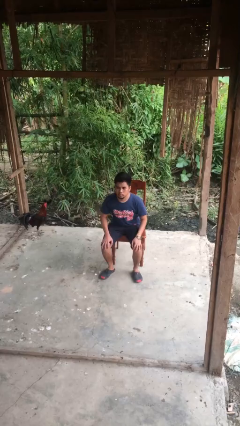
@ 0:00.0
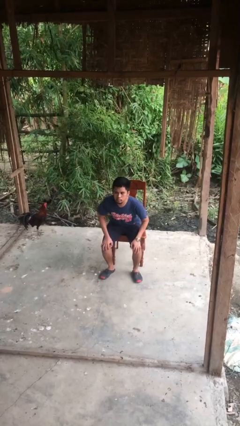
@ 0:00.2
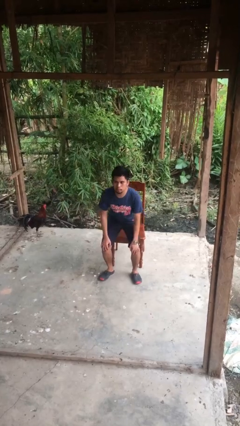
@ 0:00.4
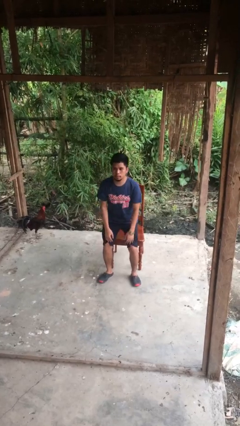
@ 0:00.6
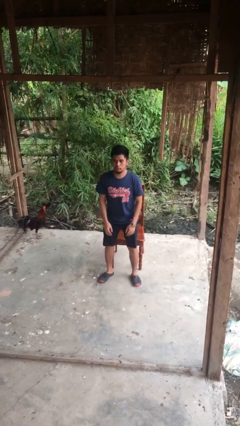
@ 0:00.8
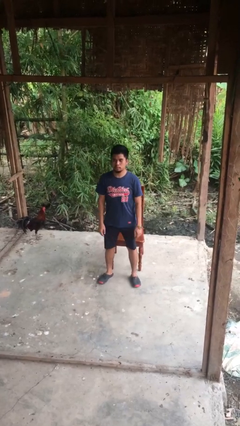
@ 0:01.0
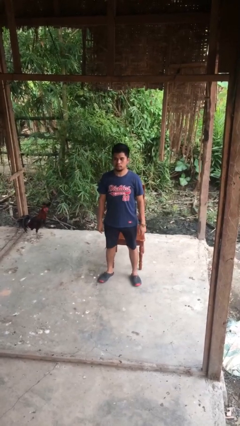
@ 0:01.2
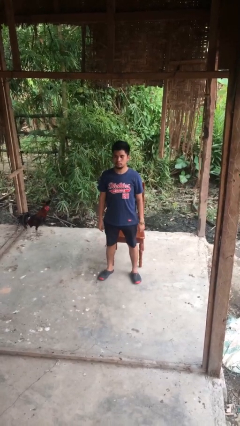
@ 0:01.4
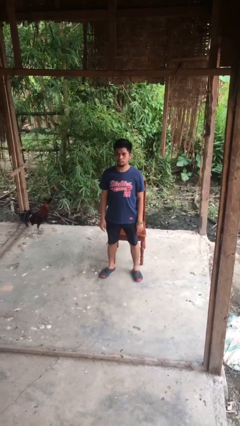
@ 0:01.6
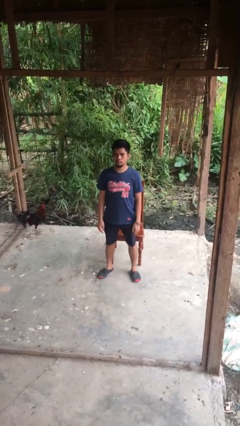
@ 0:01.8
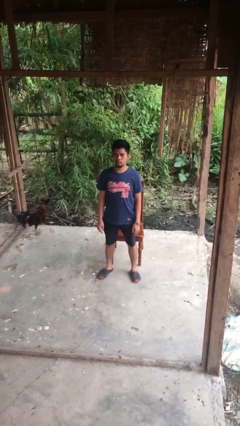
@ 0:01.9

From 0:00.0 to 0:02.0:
person stands up

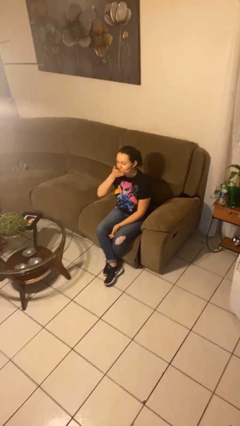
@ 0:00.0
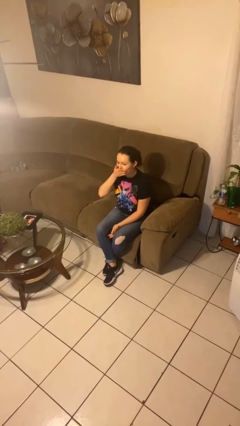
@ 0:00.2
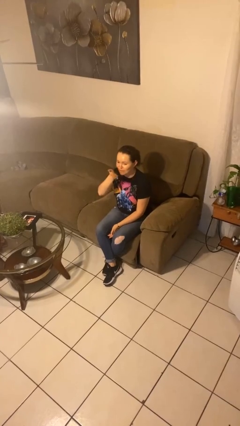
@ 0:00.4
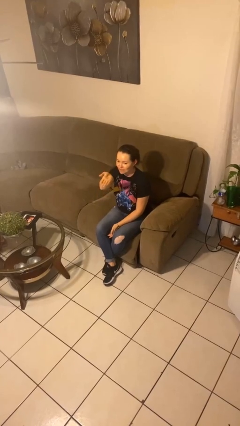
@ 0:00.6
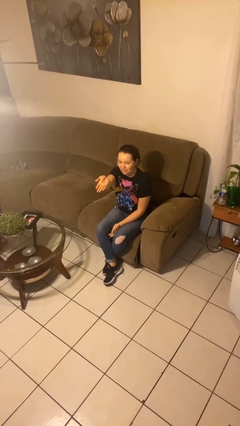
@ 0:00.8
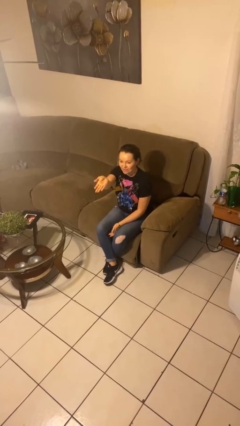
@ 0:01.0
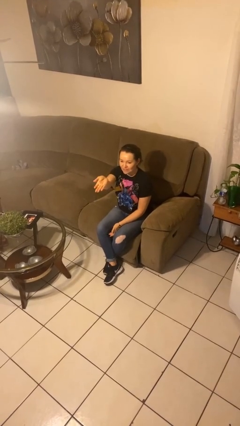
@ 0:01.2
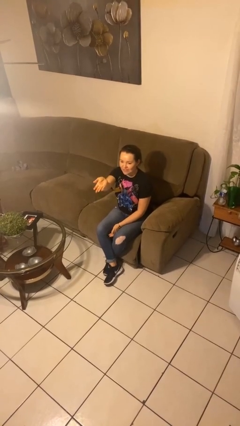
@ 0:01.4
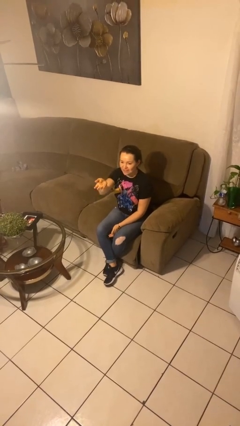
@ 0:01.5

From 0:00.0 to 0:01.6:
person gestures blow kiss

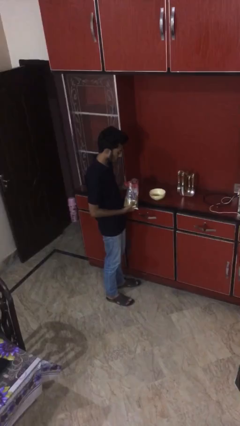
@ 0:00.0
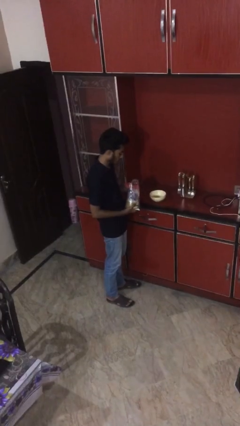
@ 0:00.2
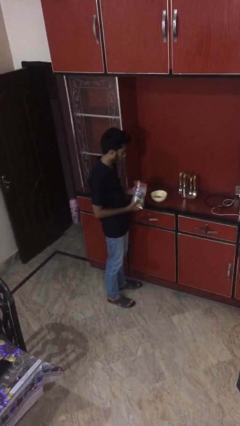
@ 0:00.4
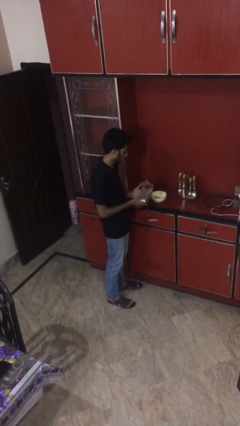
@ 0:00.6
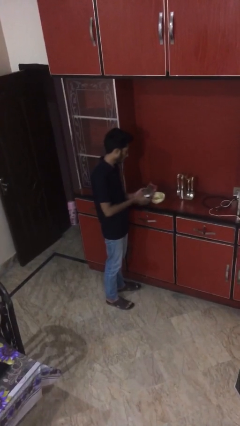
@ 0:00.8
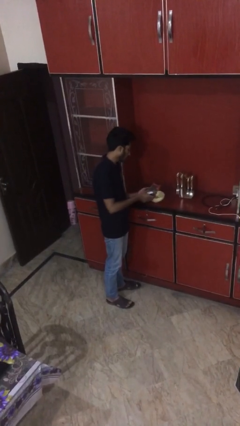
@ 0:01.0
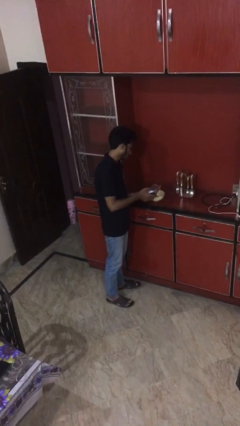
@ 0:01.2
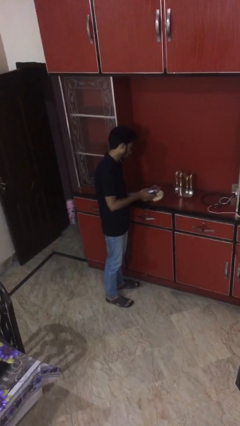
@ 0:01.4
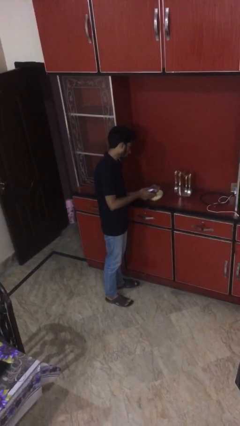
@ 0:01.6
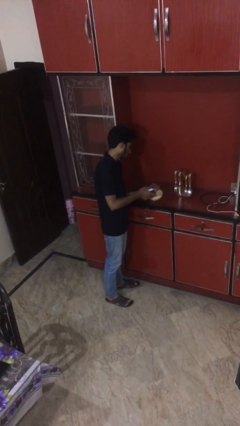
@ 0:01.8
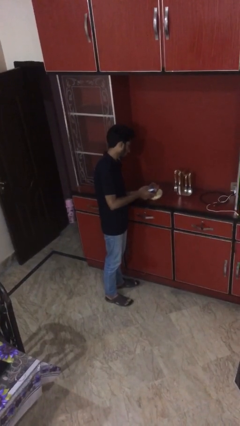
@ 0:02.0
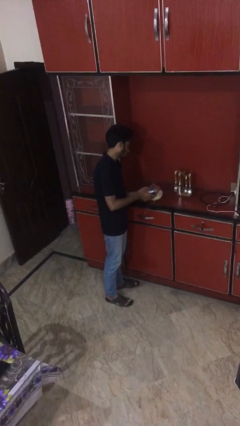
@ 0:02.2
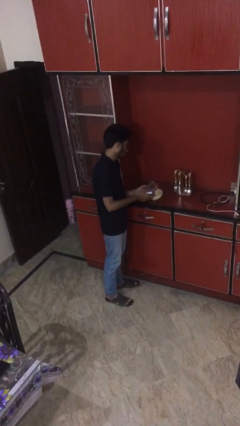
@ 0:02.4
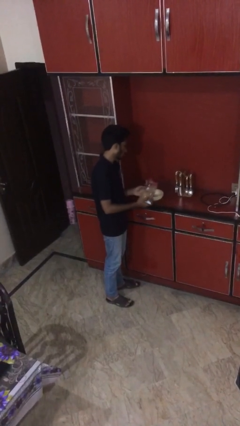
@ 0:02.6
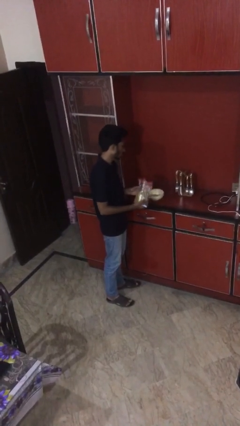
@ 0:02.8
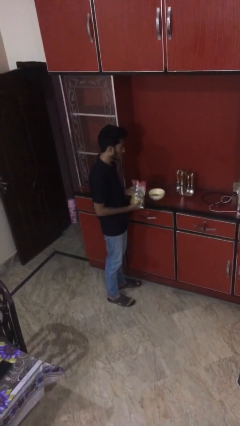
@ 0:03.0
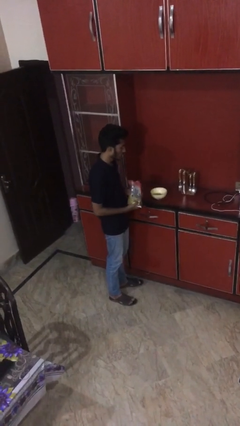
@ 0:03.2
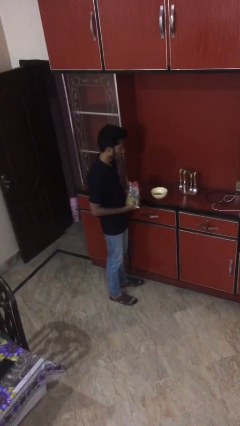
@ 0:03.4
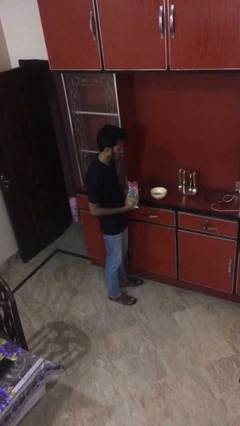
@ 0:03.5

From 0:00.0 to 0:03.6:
person pours into bowl

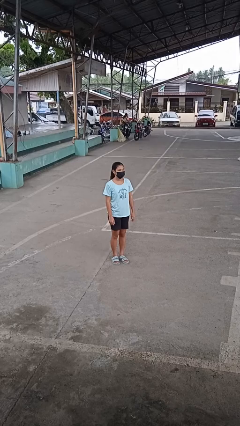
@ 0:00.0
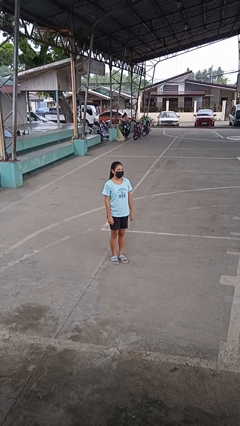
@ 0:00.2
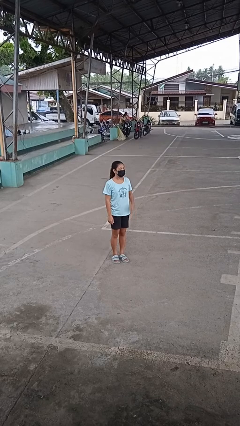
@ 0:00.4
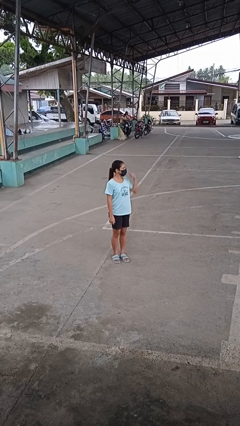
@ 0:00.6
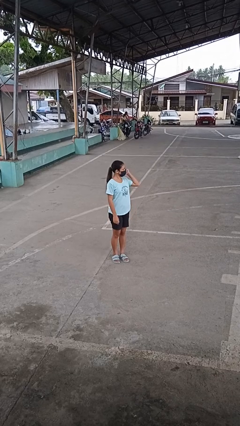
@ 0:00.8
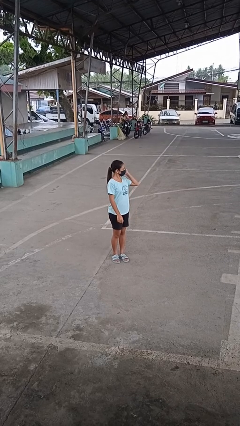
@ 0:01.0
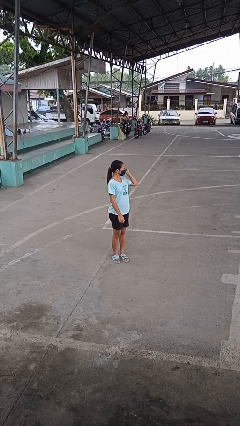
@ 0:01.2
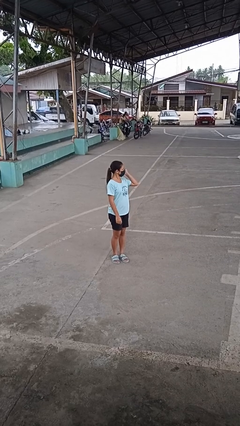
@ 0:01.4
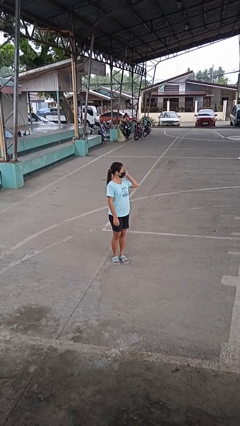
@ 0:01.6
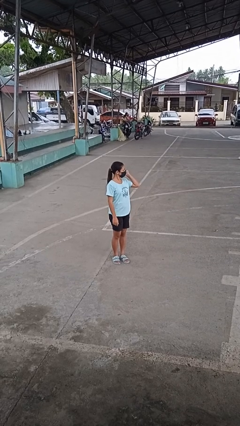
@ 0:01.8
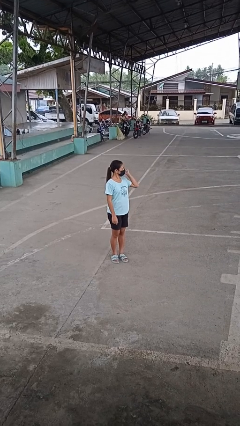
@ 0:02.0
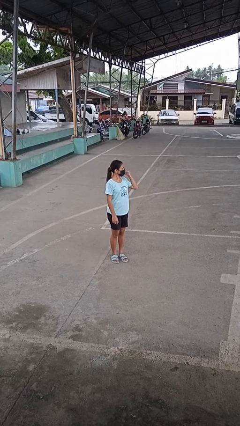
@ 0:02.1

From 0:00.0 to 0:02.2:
person gestures behind me

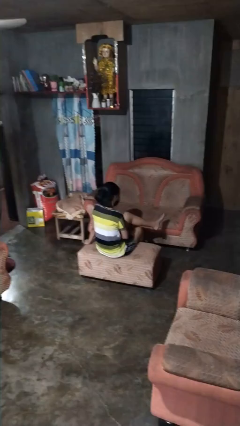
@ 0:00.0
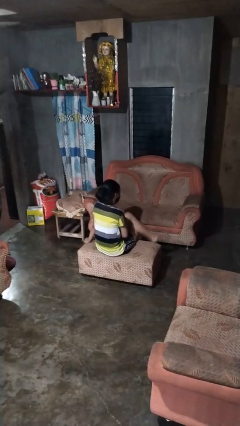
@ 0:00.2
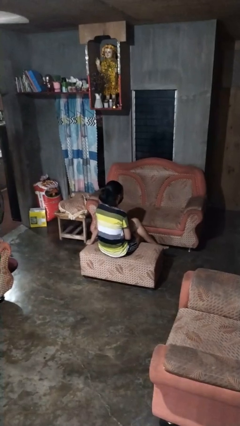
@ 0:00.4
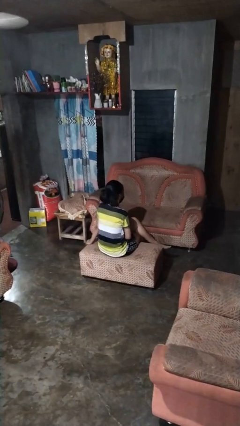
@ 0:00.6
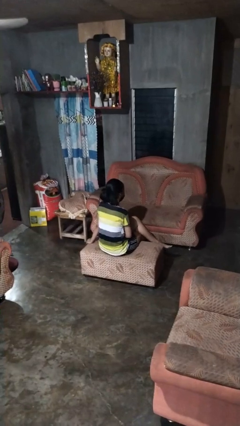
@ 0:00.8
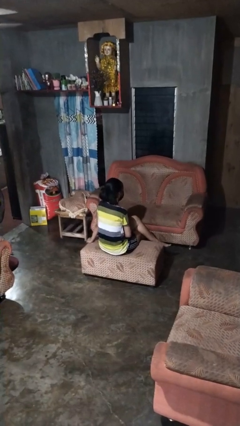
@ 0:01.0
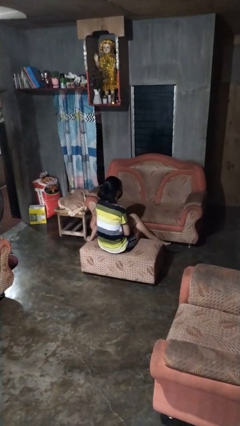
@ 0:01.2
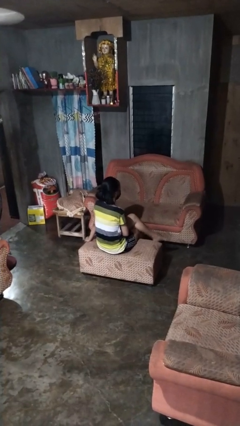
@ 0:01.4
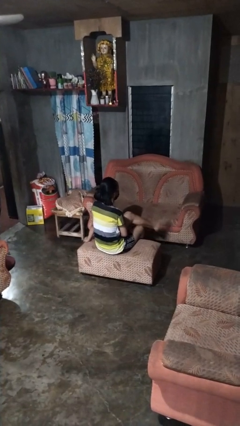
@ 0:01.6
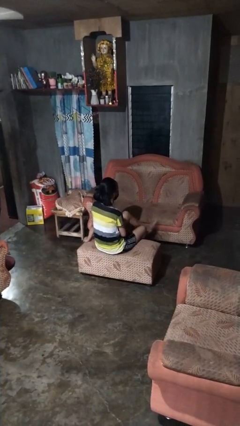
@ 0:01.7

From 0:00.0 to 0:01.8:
person crosses legs

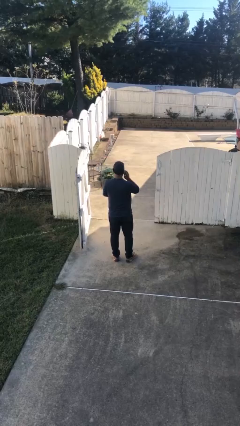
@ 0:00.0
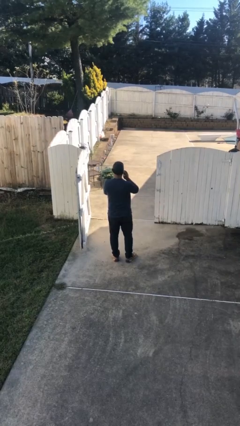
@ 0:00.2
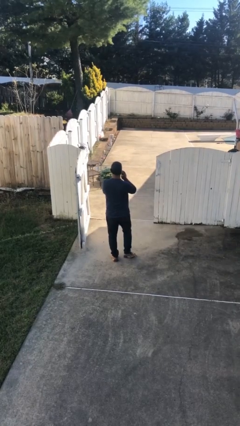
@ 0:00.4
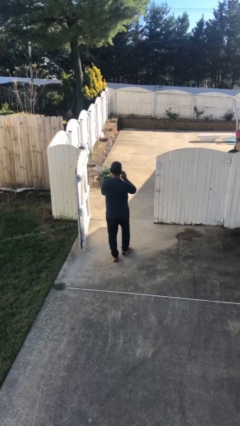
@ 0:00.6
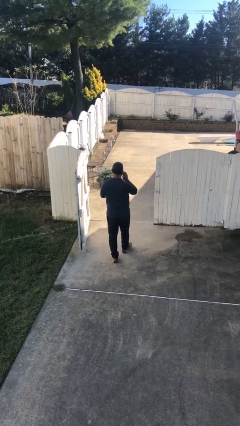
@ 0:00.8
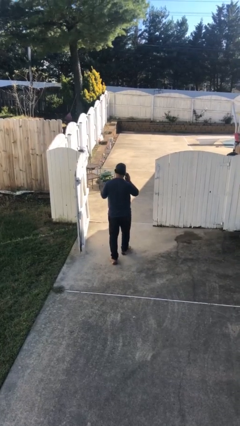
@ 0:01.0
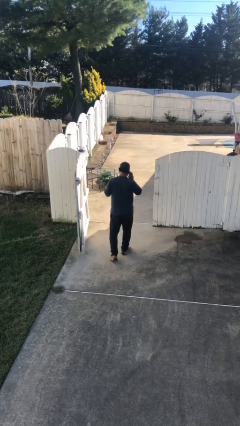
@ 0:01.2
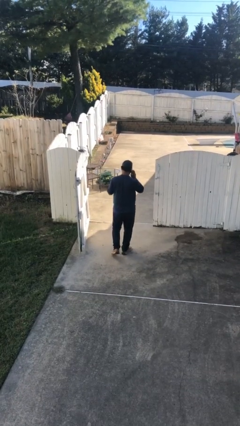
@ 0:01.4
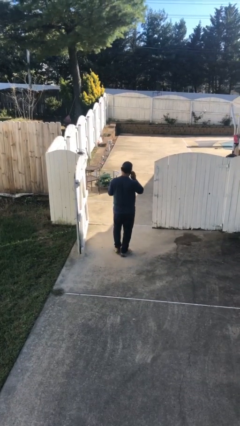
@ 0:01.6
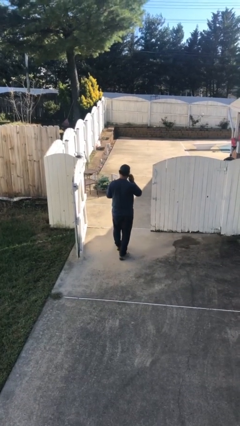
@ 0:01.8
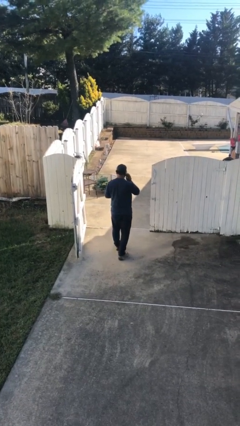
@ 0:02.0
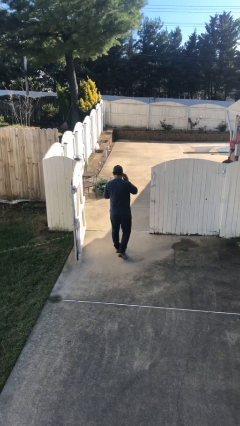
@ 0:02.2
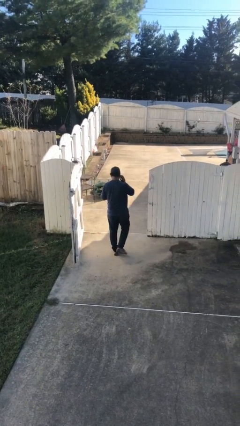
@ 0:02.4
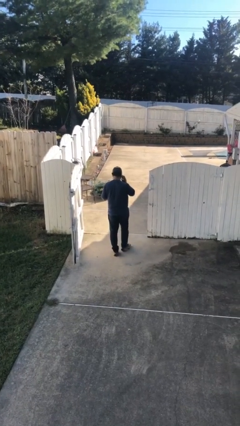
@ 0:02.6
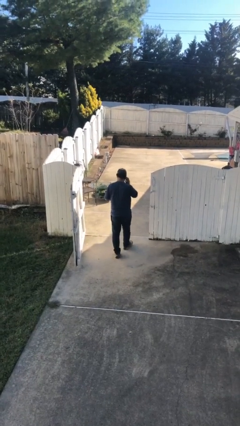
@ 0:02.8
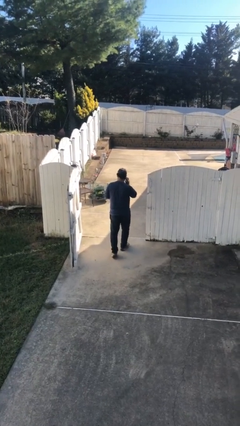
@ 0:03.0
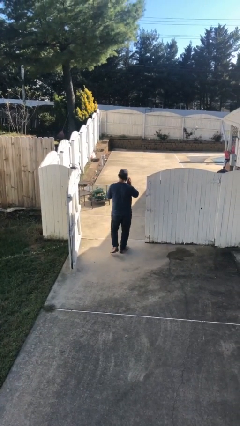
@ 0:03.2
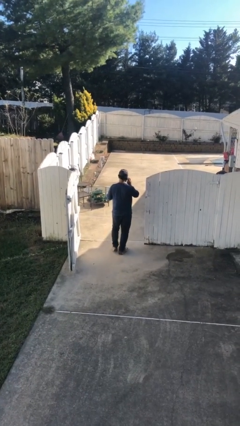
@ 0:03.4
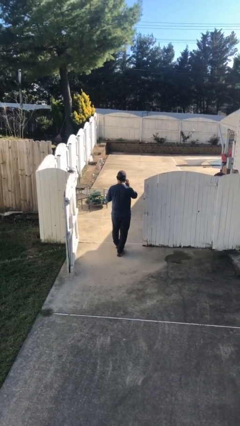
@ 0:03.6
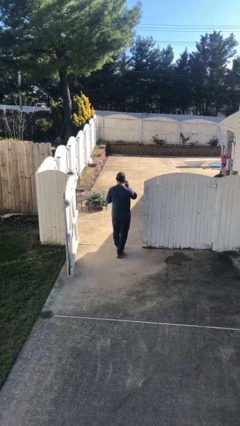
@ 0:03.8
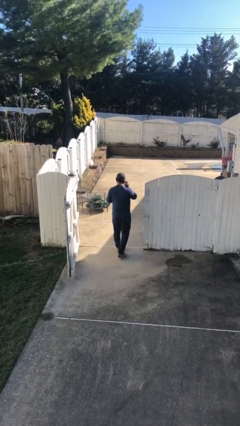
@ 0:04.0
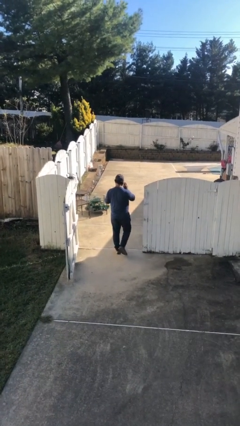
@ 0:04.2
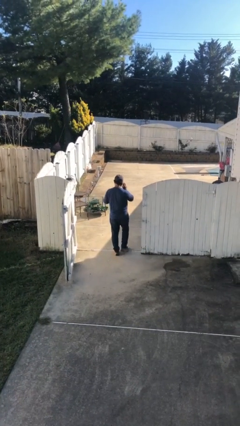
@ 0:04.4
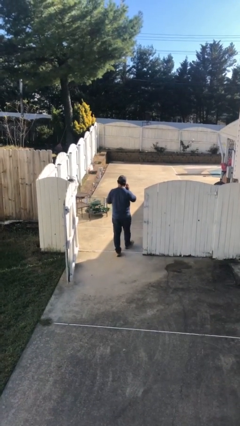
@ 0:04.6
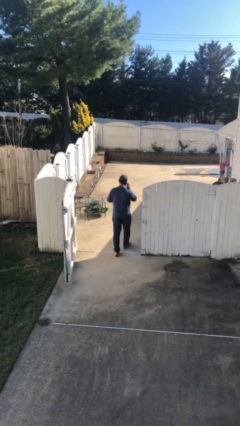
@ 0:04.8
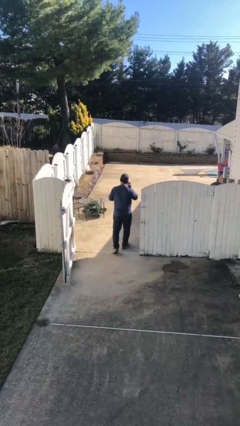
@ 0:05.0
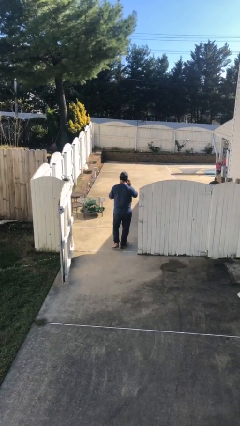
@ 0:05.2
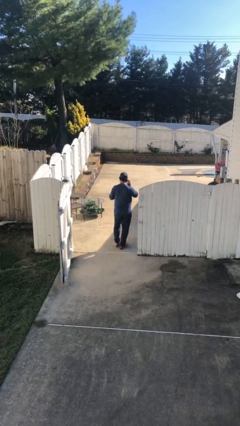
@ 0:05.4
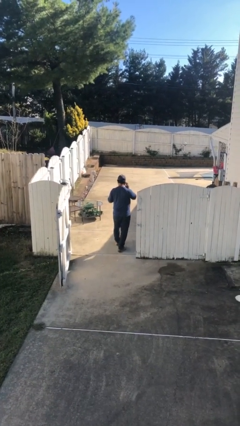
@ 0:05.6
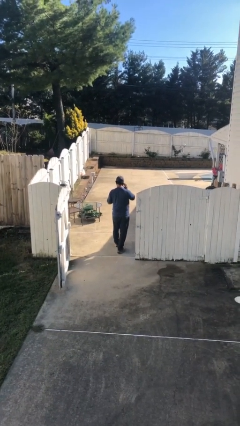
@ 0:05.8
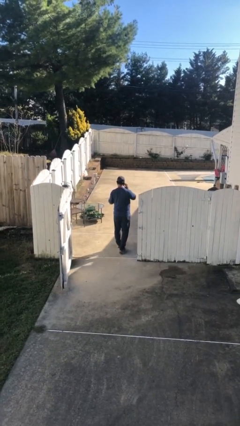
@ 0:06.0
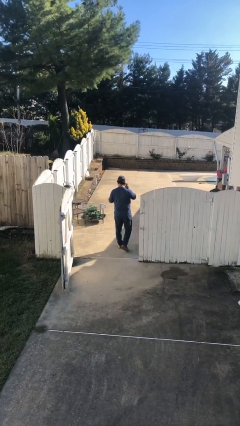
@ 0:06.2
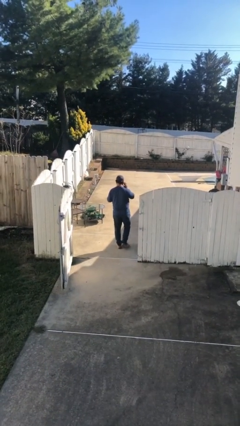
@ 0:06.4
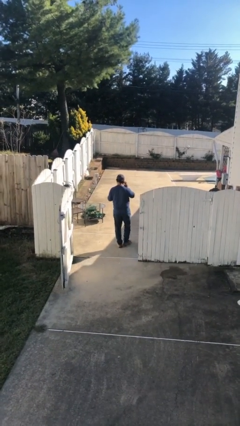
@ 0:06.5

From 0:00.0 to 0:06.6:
person exits scene through structure
